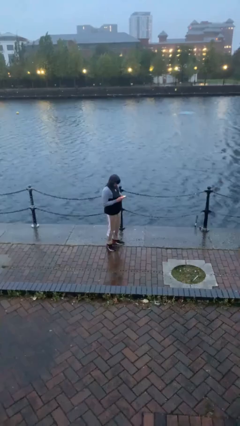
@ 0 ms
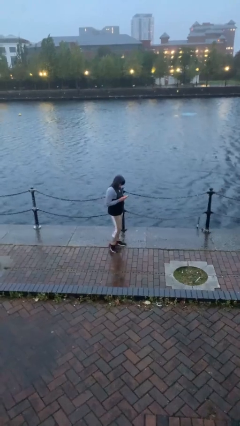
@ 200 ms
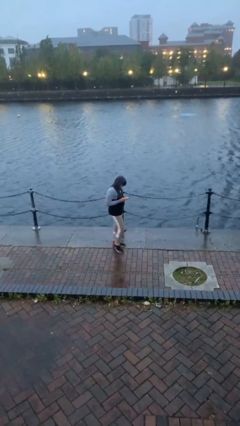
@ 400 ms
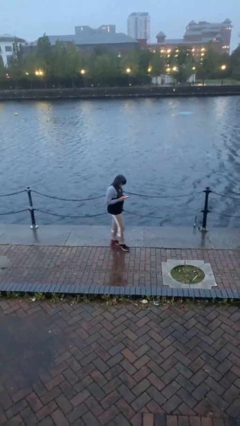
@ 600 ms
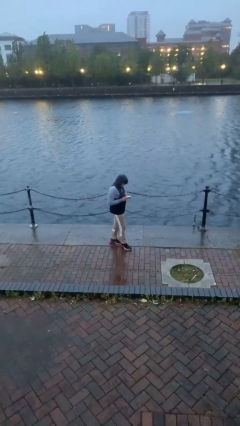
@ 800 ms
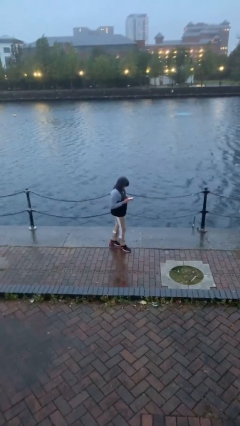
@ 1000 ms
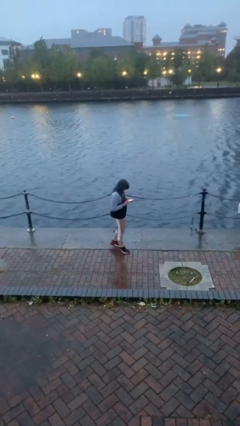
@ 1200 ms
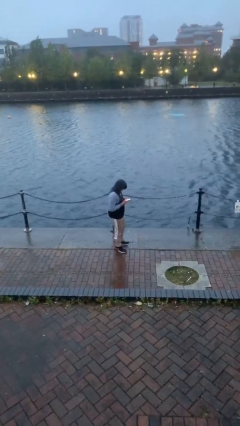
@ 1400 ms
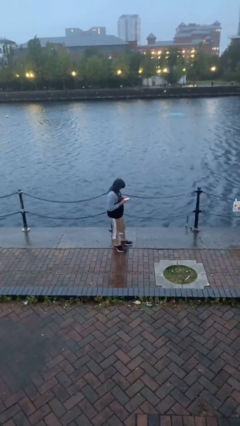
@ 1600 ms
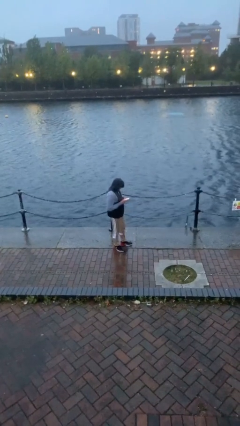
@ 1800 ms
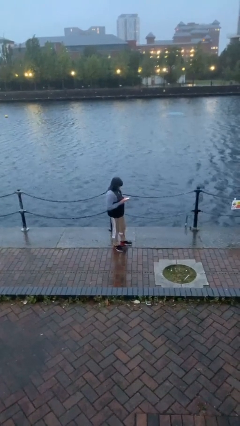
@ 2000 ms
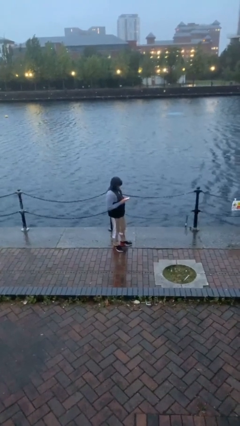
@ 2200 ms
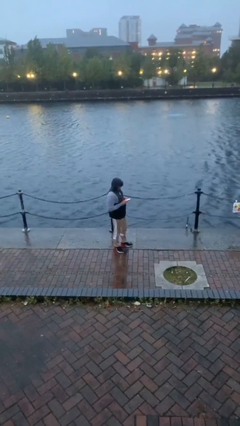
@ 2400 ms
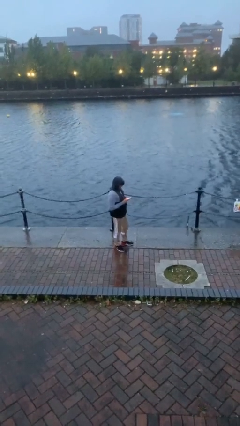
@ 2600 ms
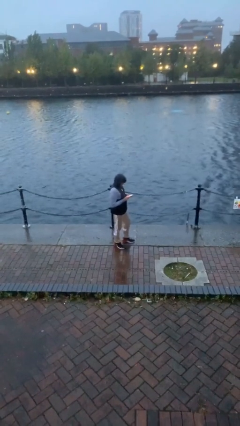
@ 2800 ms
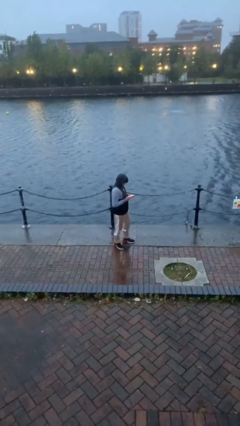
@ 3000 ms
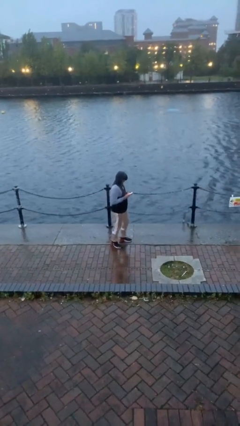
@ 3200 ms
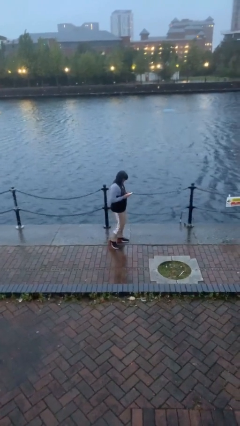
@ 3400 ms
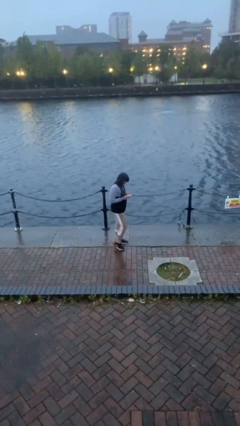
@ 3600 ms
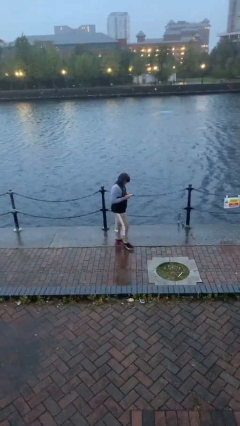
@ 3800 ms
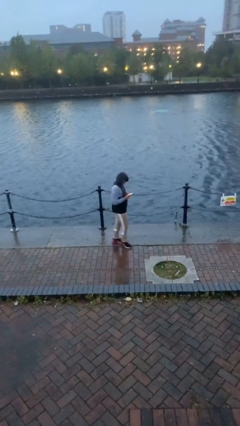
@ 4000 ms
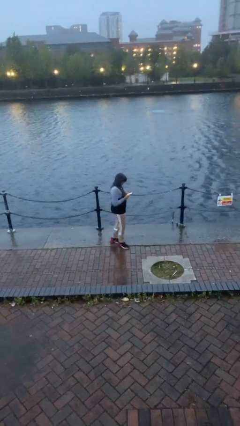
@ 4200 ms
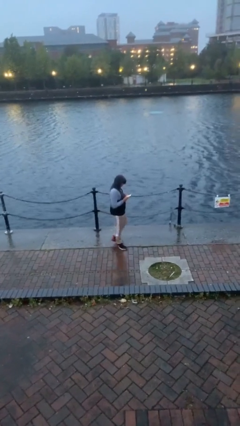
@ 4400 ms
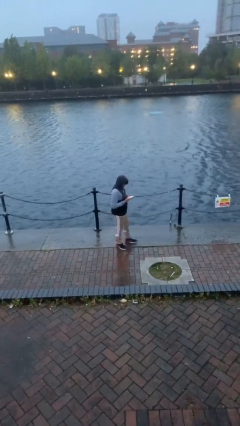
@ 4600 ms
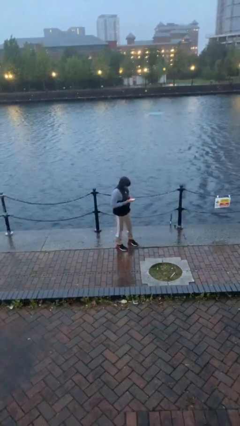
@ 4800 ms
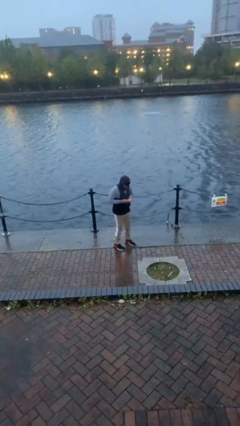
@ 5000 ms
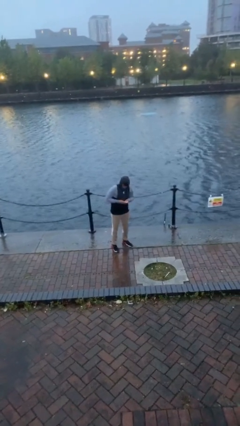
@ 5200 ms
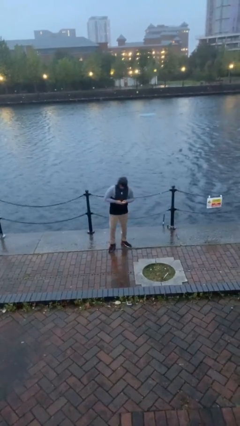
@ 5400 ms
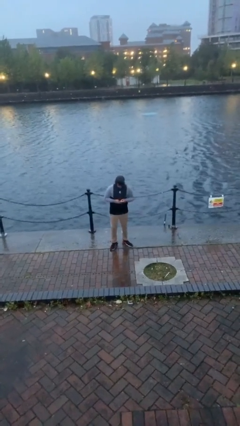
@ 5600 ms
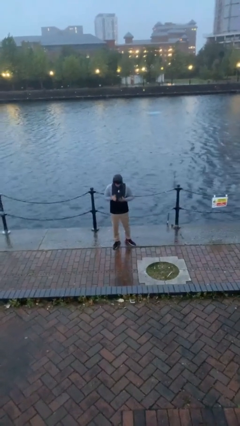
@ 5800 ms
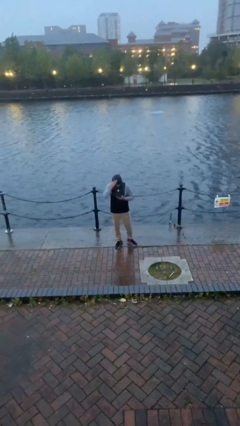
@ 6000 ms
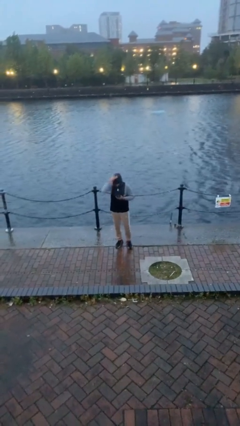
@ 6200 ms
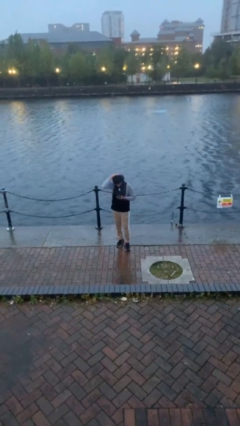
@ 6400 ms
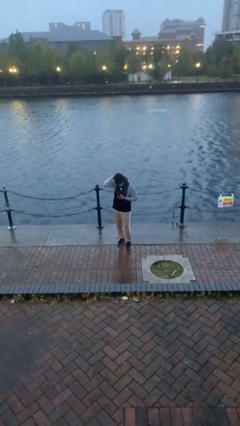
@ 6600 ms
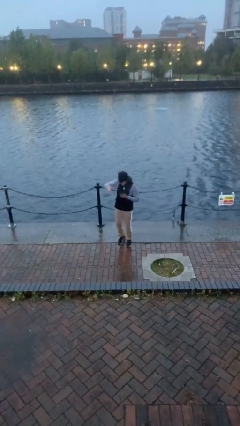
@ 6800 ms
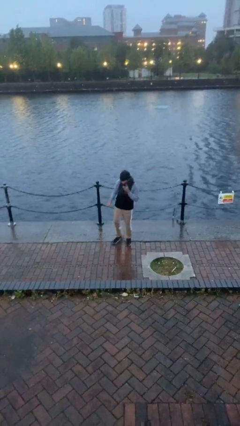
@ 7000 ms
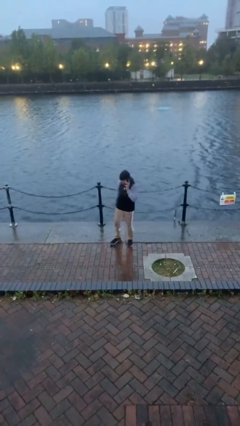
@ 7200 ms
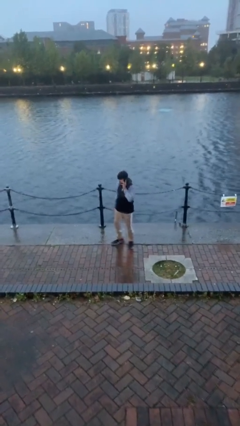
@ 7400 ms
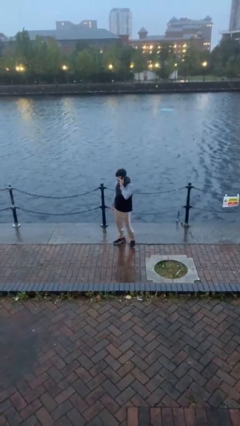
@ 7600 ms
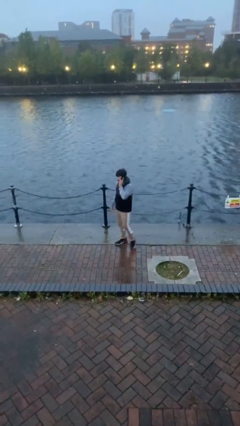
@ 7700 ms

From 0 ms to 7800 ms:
person texts on phone

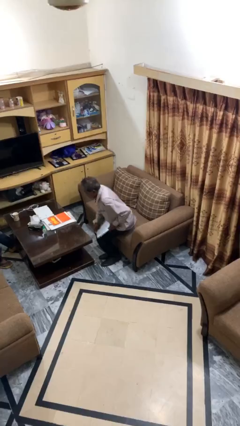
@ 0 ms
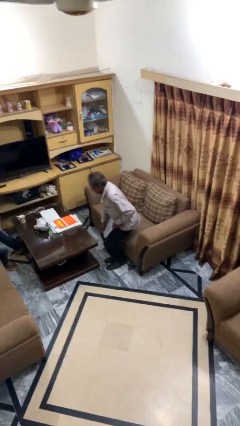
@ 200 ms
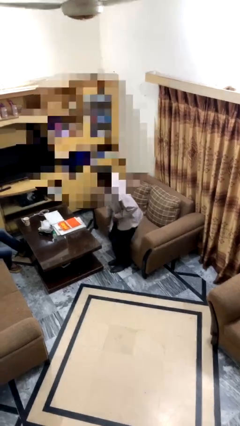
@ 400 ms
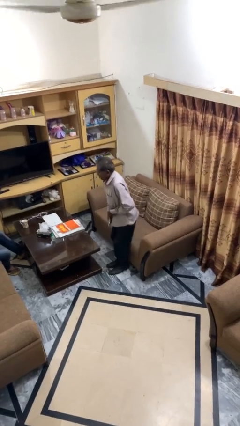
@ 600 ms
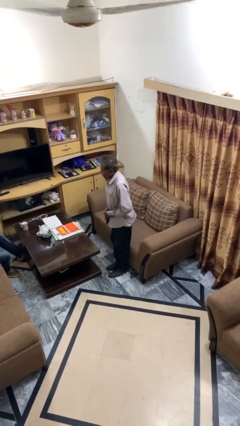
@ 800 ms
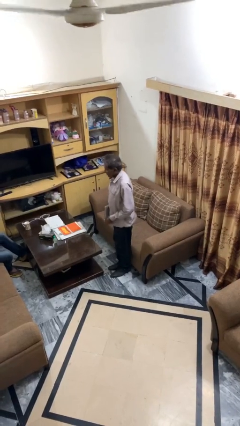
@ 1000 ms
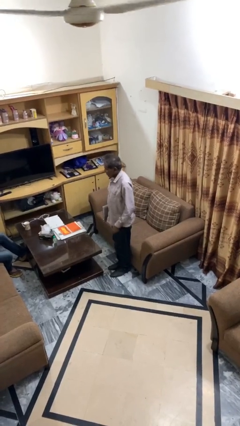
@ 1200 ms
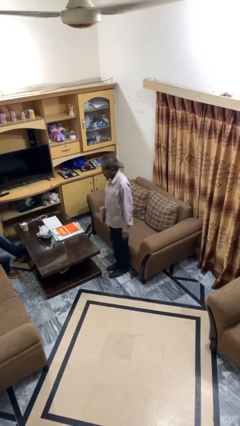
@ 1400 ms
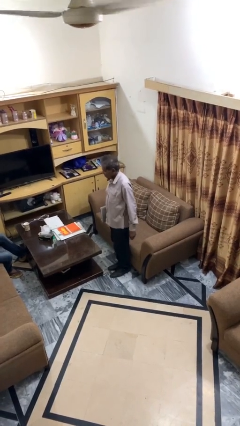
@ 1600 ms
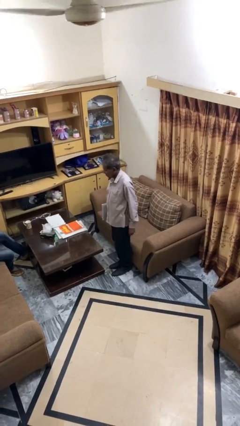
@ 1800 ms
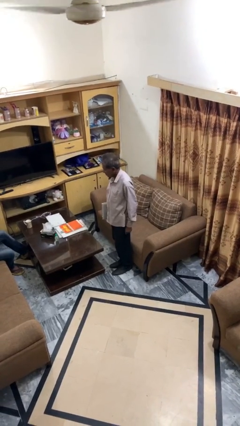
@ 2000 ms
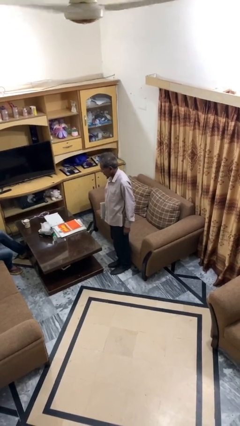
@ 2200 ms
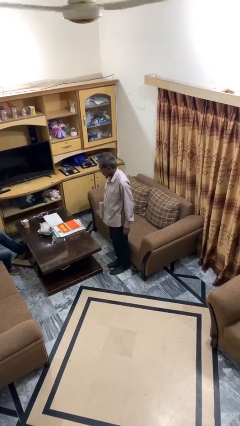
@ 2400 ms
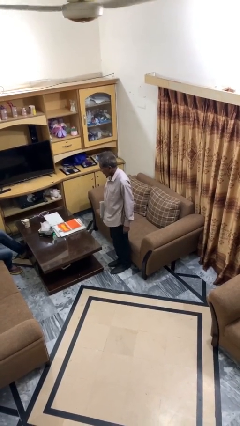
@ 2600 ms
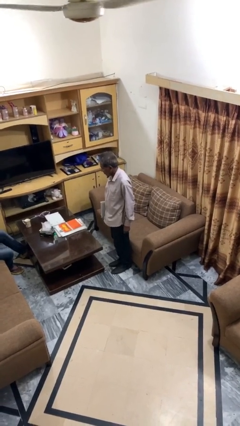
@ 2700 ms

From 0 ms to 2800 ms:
person stands up

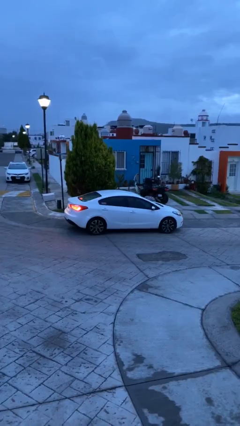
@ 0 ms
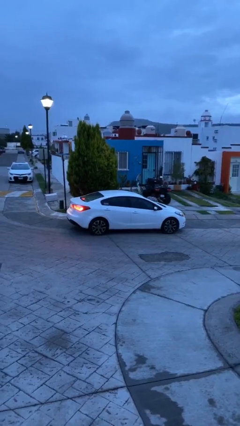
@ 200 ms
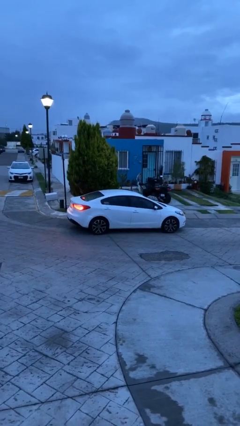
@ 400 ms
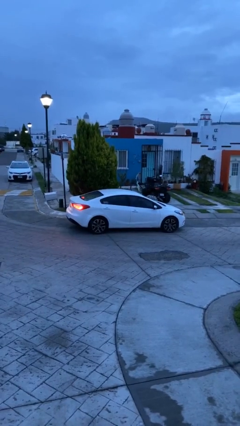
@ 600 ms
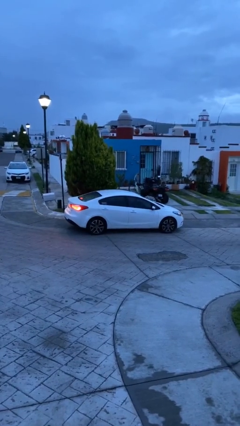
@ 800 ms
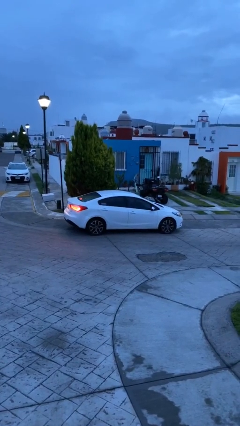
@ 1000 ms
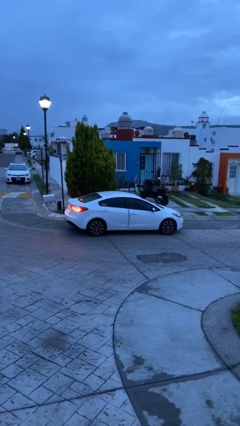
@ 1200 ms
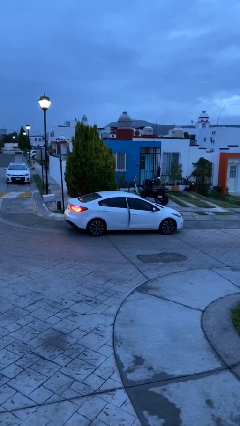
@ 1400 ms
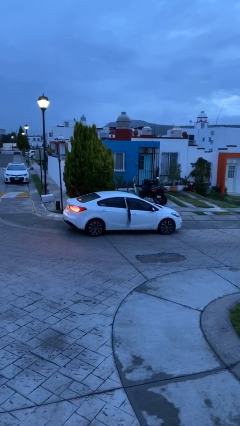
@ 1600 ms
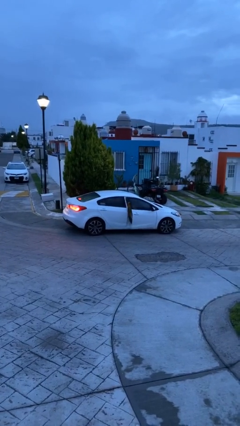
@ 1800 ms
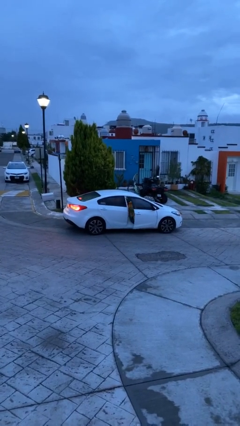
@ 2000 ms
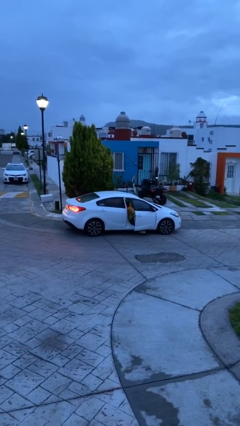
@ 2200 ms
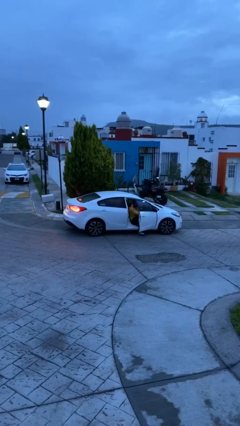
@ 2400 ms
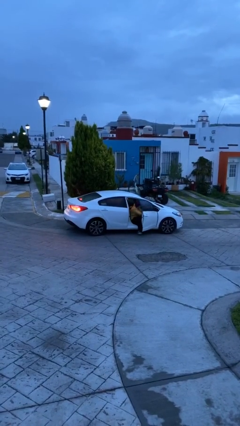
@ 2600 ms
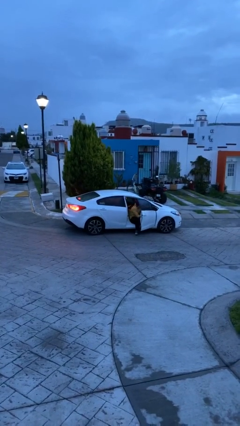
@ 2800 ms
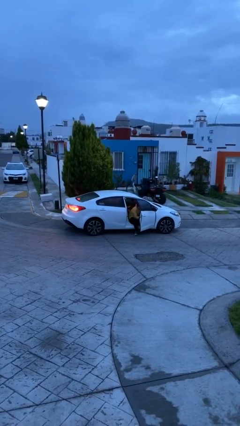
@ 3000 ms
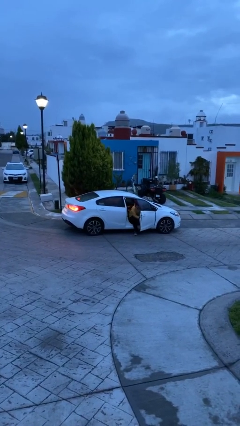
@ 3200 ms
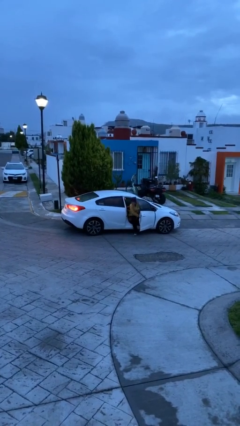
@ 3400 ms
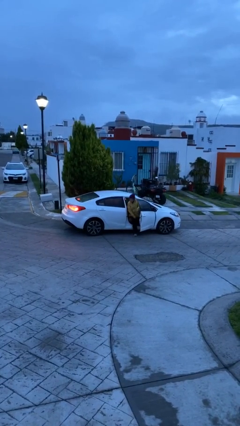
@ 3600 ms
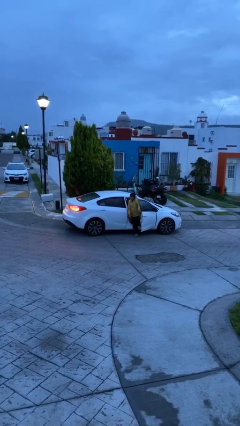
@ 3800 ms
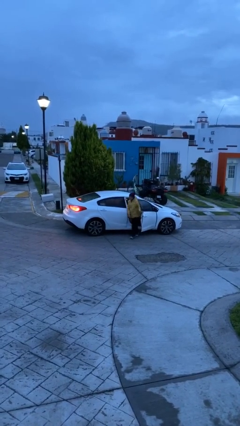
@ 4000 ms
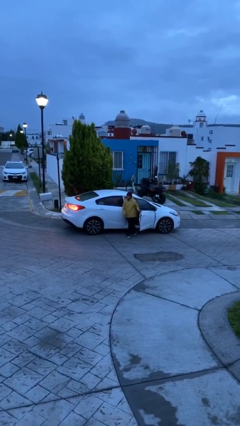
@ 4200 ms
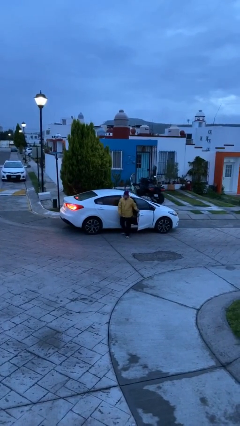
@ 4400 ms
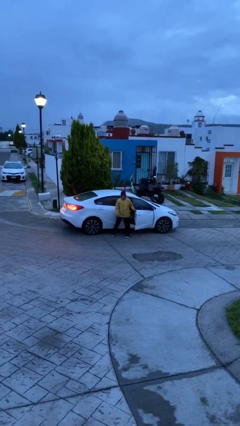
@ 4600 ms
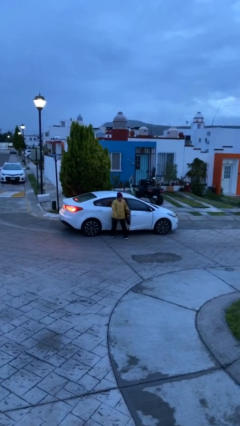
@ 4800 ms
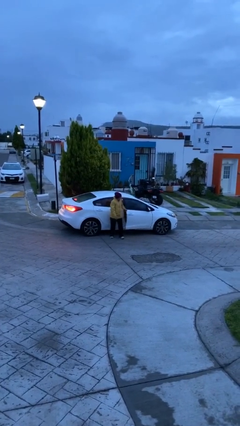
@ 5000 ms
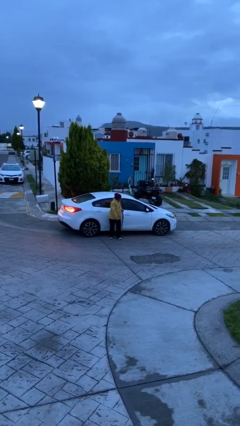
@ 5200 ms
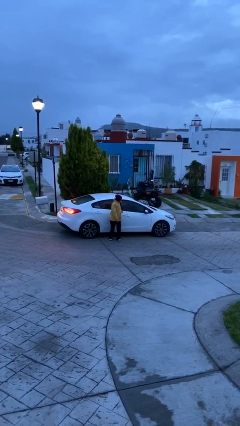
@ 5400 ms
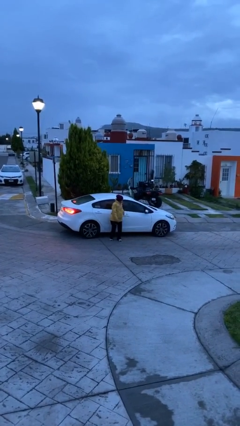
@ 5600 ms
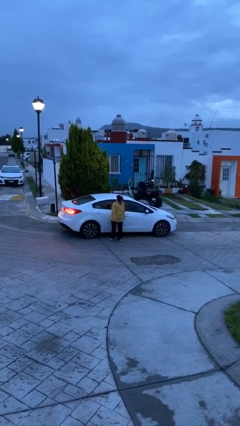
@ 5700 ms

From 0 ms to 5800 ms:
car drops off person

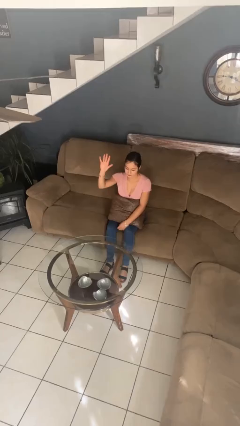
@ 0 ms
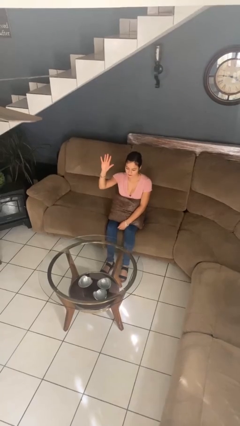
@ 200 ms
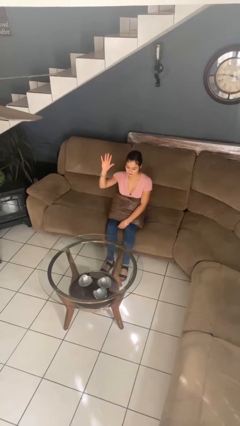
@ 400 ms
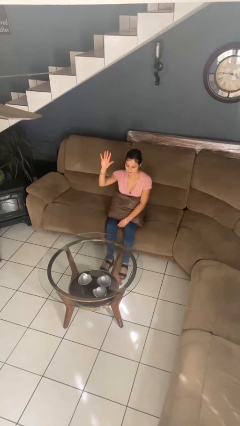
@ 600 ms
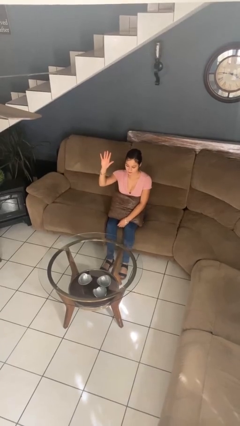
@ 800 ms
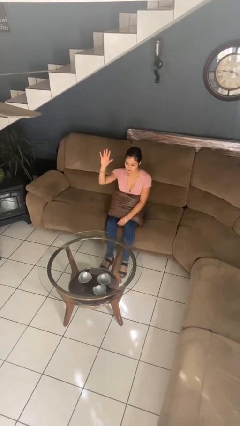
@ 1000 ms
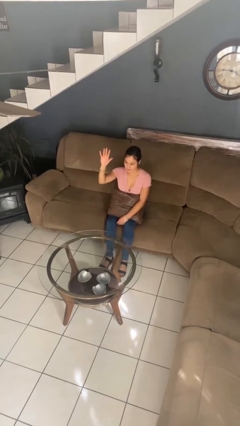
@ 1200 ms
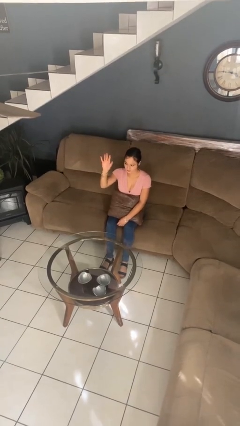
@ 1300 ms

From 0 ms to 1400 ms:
person gestures number five
